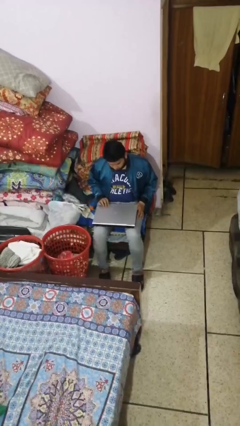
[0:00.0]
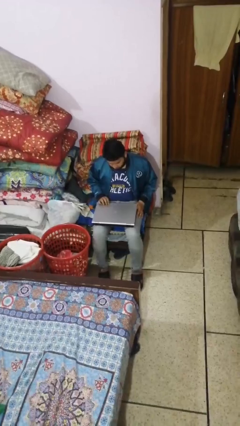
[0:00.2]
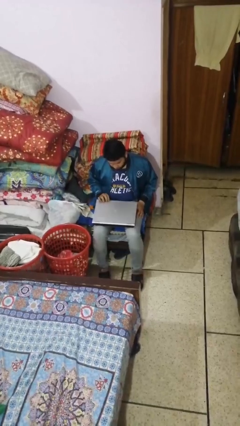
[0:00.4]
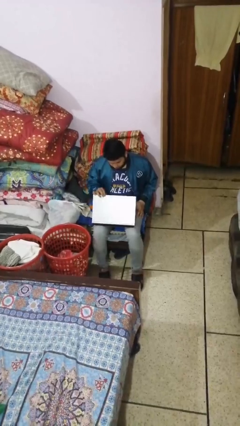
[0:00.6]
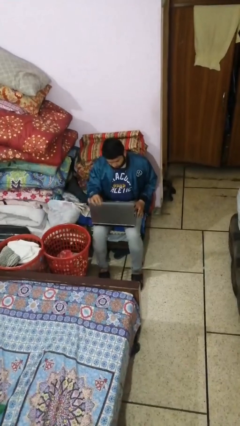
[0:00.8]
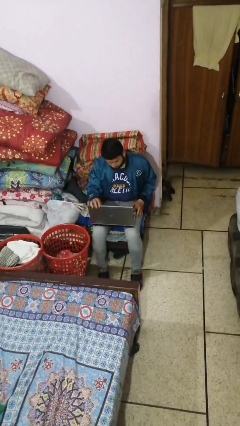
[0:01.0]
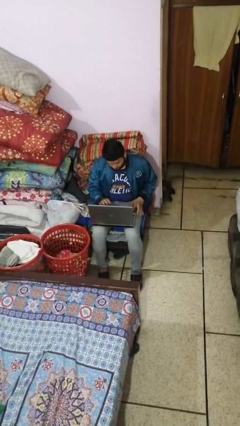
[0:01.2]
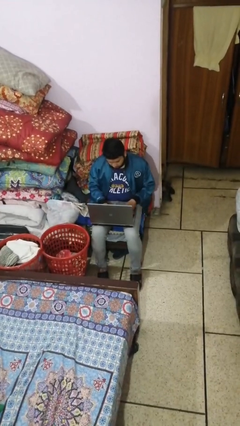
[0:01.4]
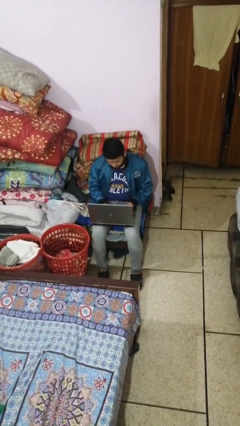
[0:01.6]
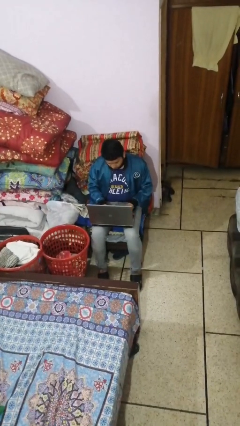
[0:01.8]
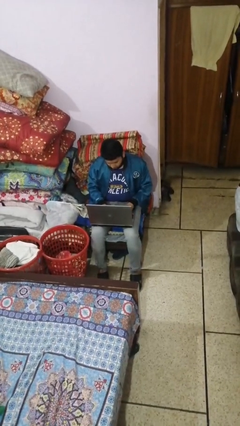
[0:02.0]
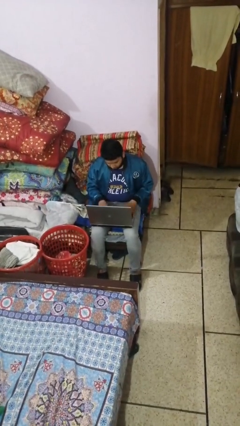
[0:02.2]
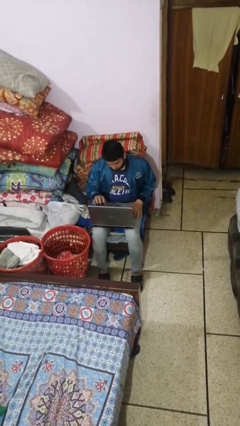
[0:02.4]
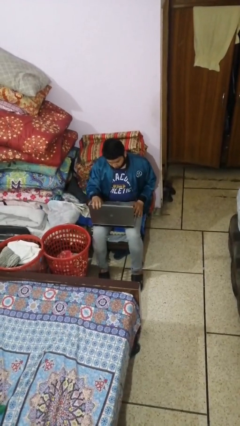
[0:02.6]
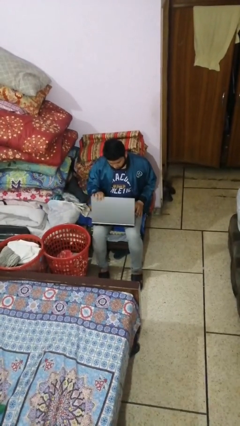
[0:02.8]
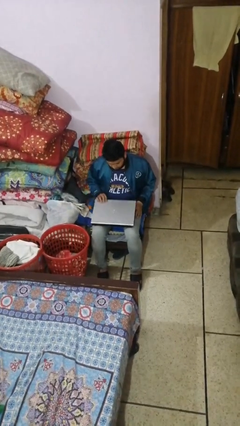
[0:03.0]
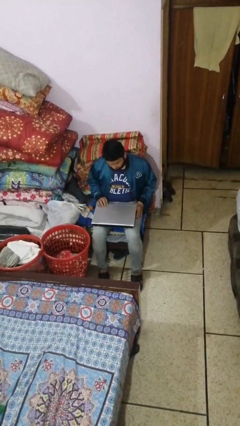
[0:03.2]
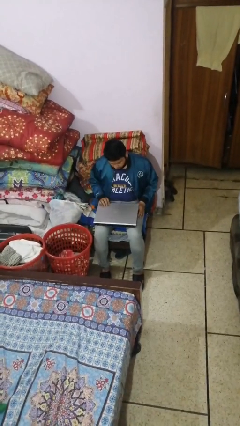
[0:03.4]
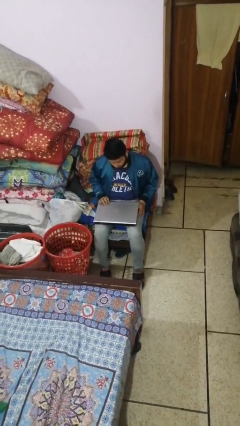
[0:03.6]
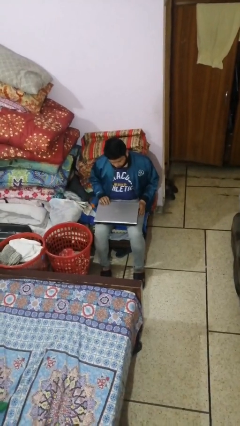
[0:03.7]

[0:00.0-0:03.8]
person interacts with laptop

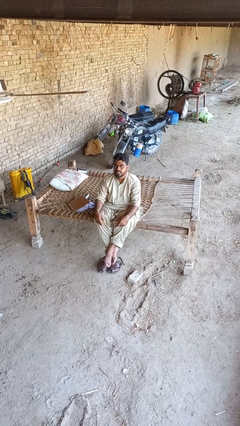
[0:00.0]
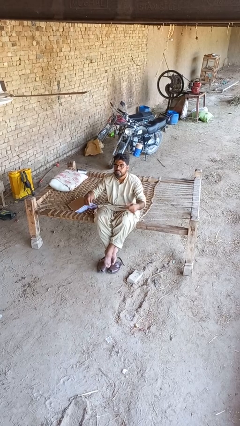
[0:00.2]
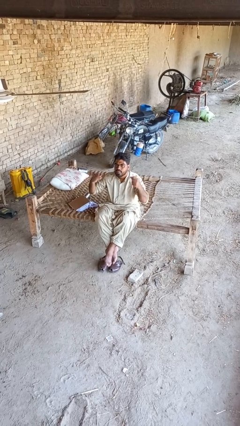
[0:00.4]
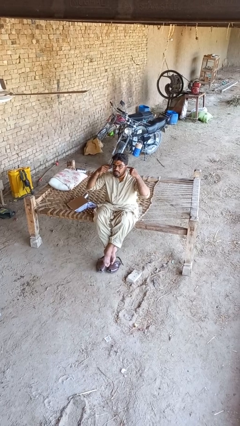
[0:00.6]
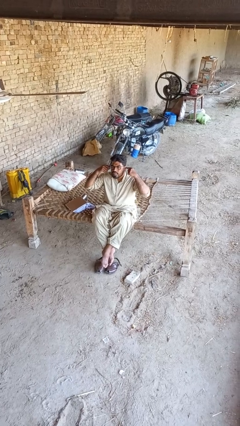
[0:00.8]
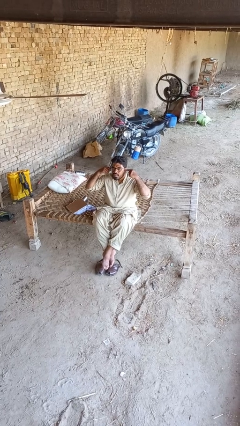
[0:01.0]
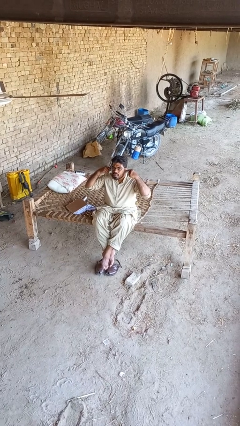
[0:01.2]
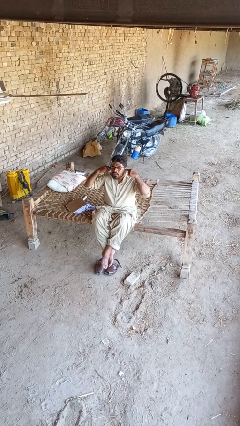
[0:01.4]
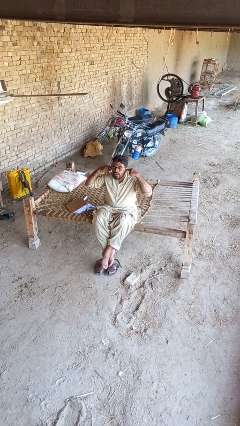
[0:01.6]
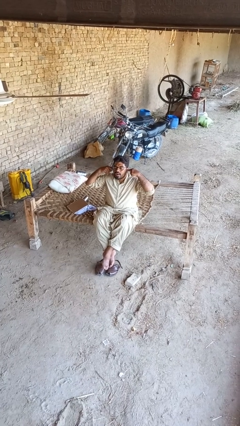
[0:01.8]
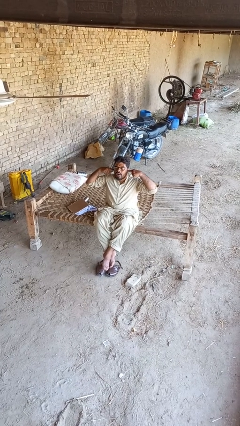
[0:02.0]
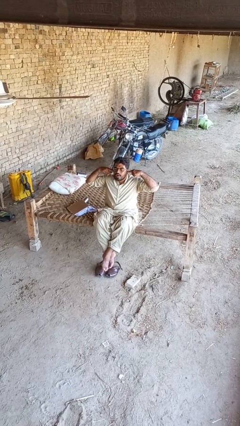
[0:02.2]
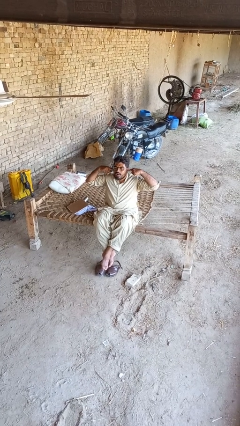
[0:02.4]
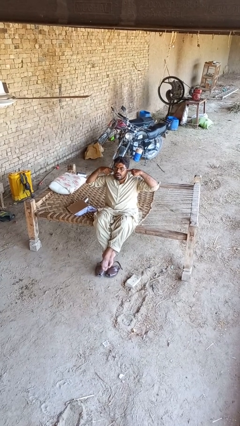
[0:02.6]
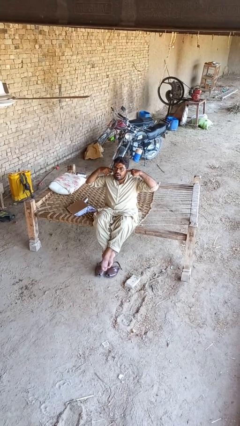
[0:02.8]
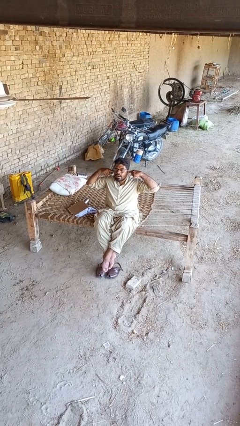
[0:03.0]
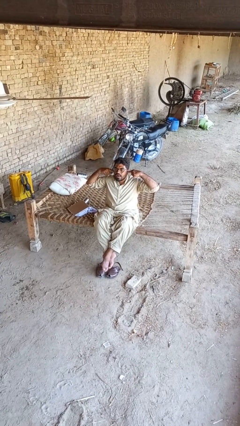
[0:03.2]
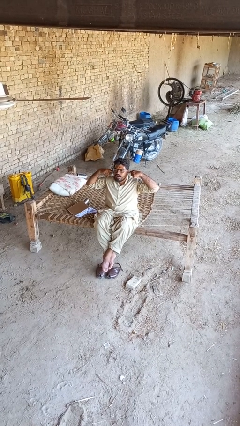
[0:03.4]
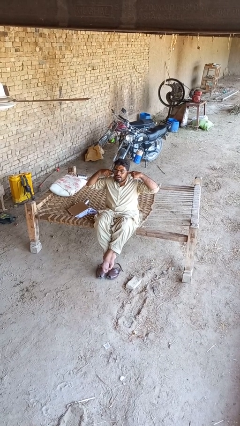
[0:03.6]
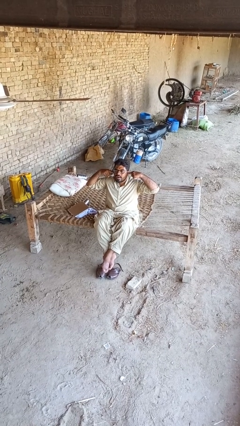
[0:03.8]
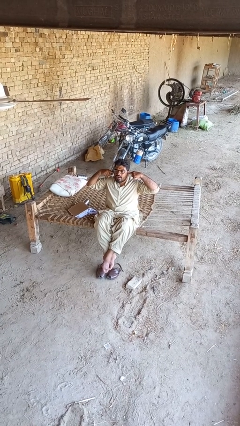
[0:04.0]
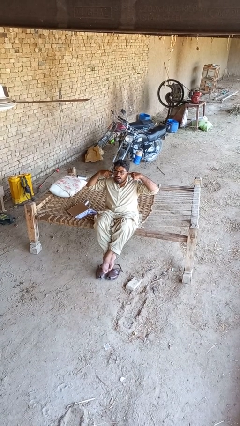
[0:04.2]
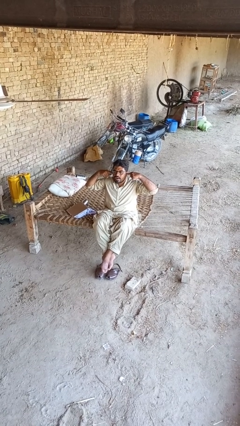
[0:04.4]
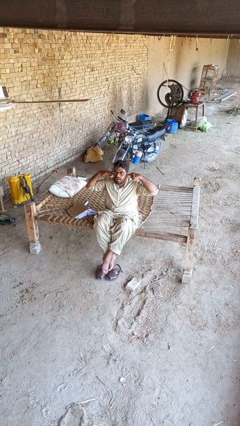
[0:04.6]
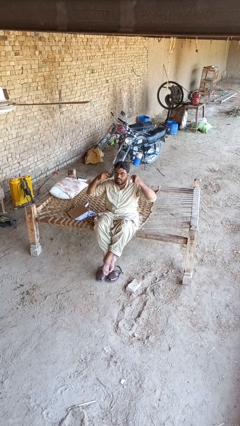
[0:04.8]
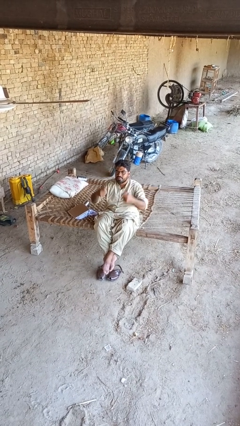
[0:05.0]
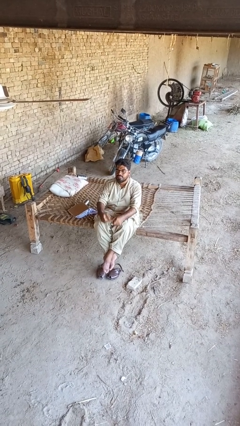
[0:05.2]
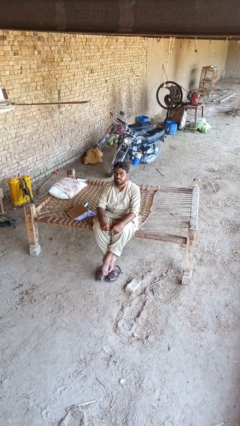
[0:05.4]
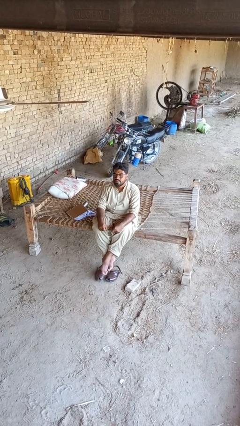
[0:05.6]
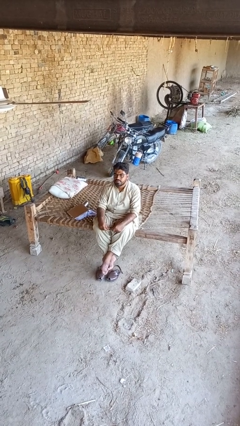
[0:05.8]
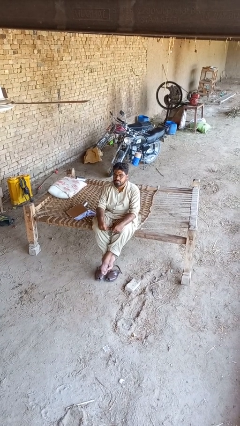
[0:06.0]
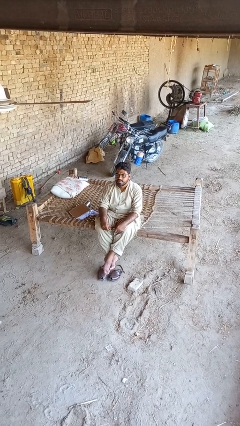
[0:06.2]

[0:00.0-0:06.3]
person puts fingers in ear

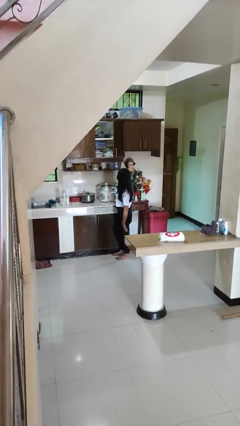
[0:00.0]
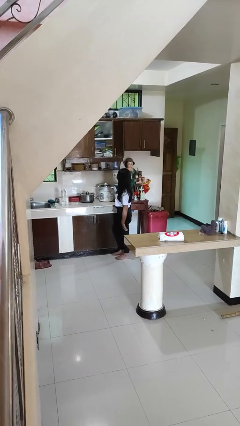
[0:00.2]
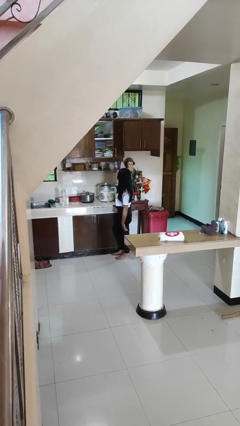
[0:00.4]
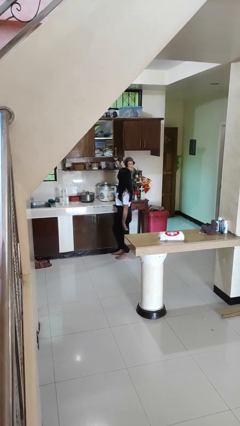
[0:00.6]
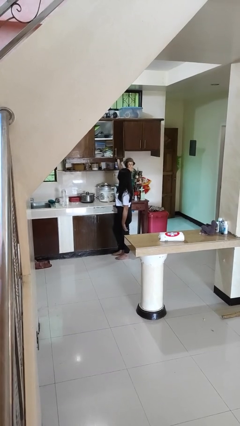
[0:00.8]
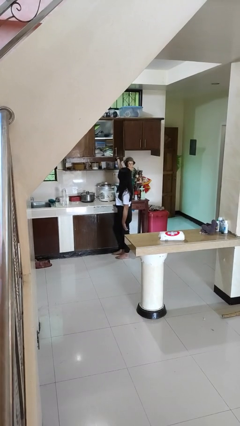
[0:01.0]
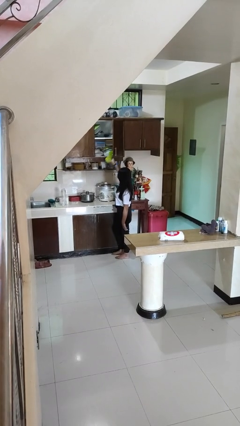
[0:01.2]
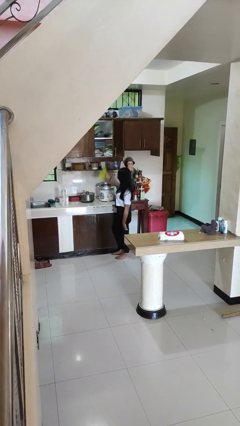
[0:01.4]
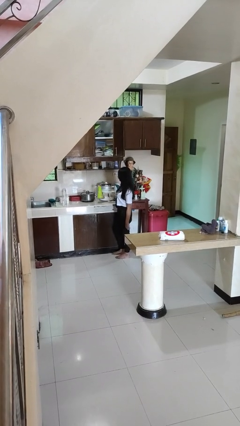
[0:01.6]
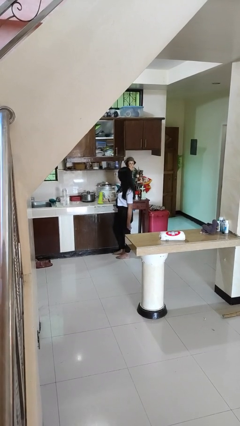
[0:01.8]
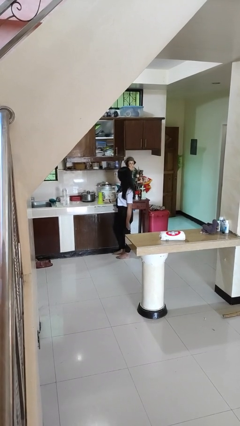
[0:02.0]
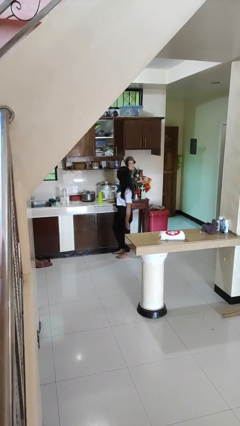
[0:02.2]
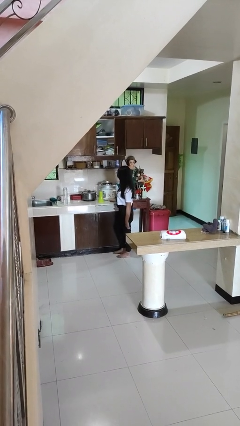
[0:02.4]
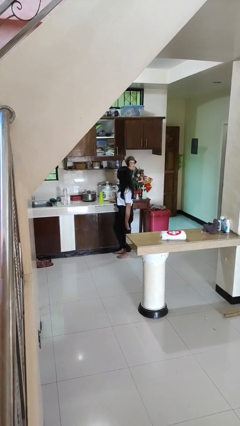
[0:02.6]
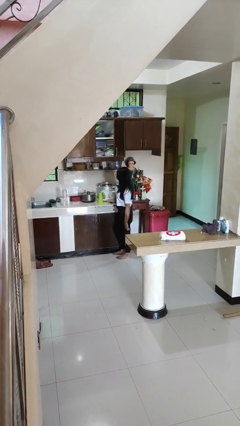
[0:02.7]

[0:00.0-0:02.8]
person picks up object from cabinet

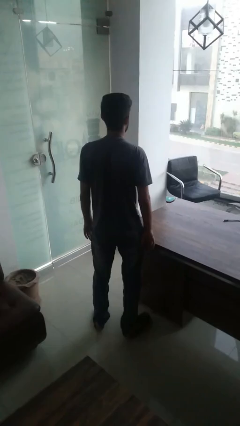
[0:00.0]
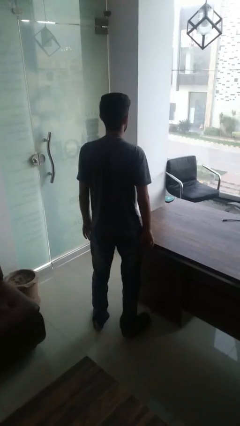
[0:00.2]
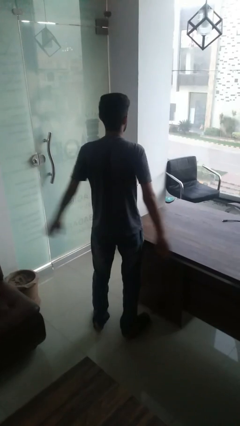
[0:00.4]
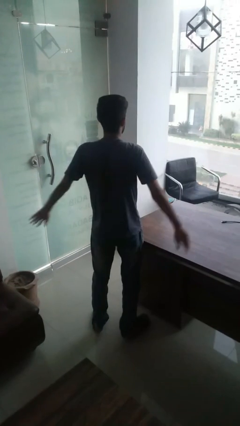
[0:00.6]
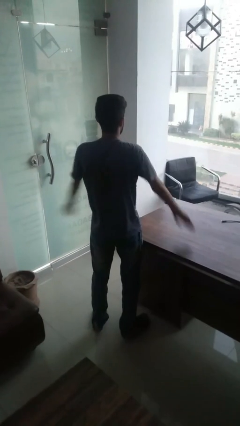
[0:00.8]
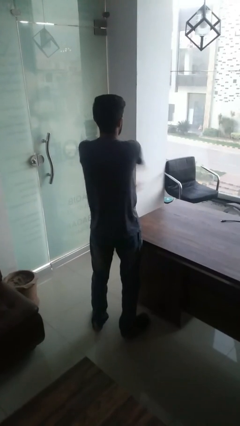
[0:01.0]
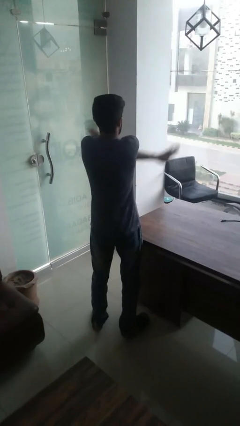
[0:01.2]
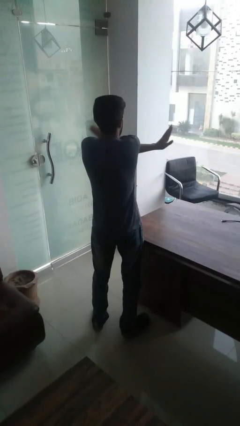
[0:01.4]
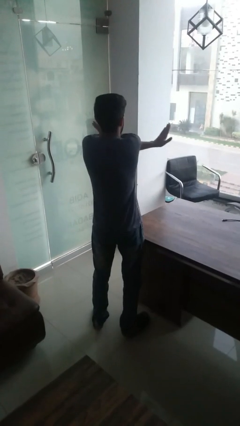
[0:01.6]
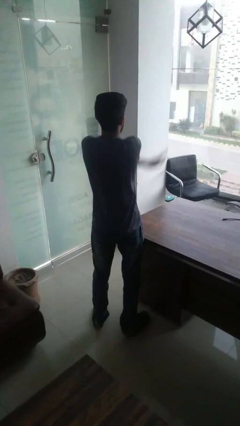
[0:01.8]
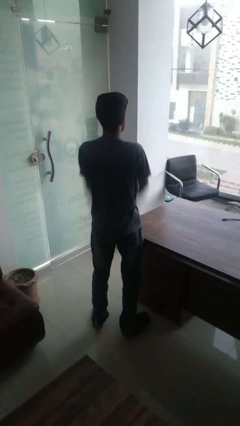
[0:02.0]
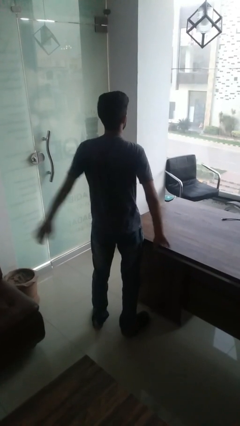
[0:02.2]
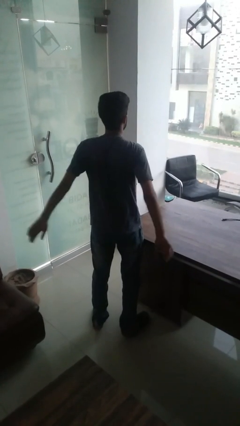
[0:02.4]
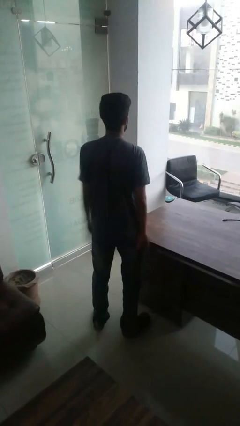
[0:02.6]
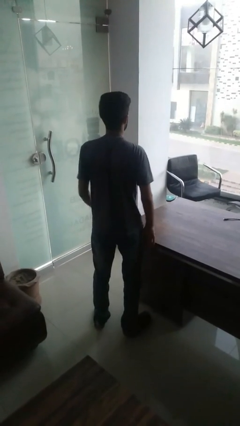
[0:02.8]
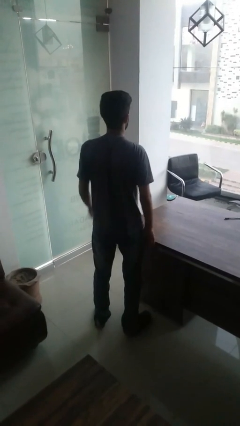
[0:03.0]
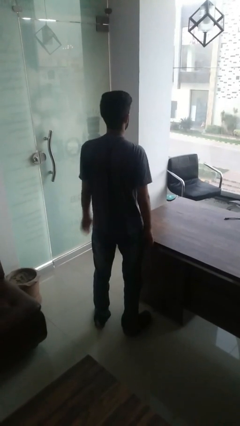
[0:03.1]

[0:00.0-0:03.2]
person gestures arms x

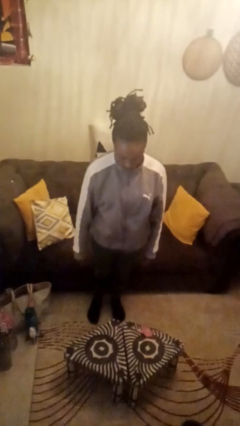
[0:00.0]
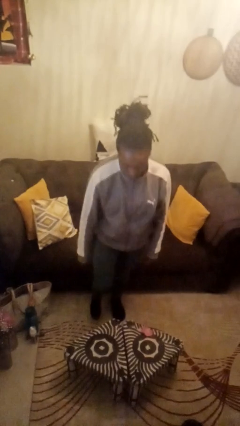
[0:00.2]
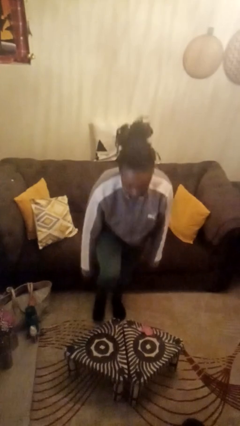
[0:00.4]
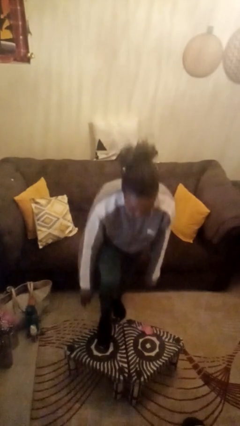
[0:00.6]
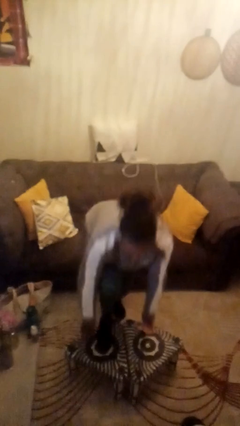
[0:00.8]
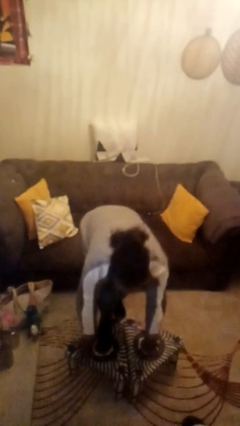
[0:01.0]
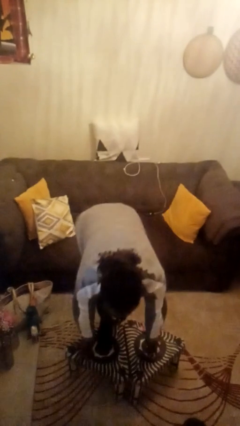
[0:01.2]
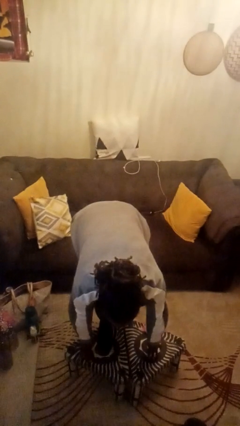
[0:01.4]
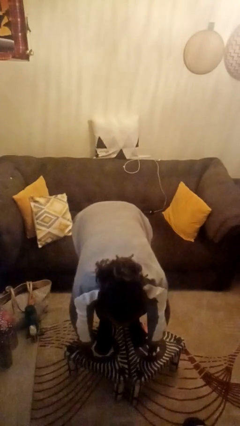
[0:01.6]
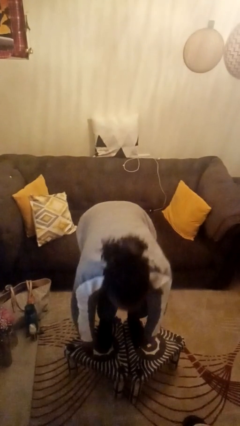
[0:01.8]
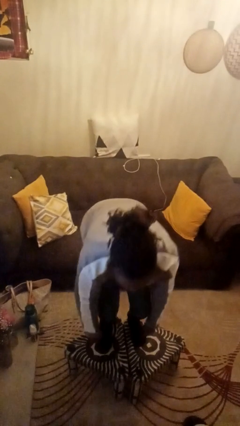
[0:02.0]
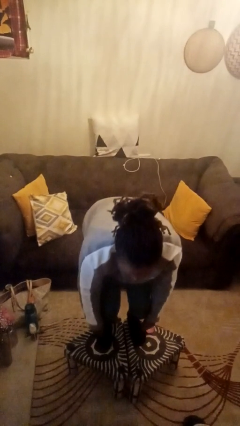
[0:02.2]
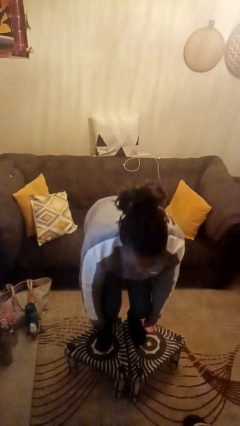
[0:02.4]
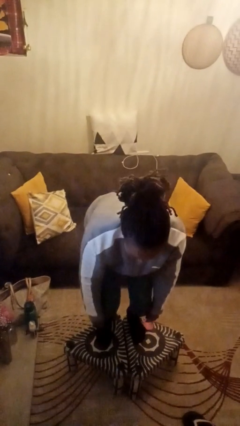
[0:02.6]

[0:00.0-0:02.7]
person climbs on table
